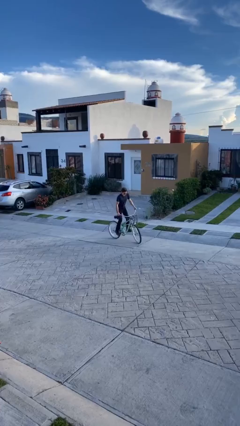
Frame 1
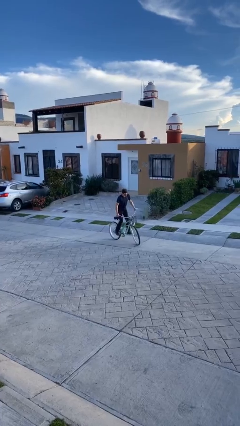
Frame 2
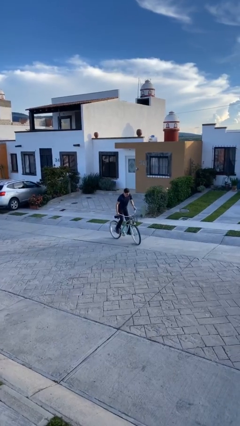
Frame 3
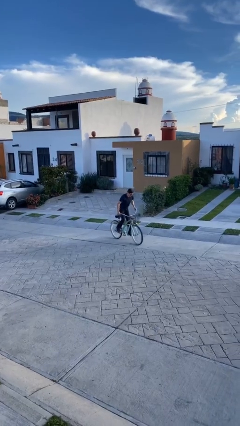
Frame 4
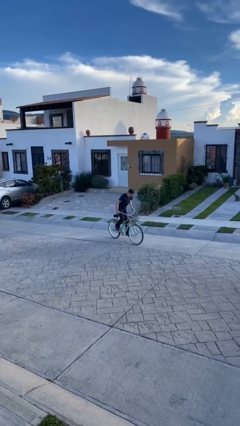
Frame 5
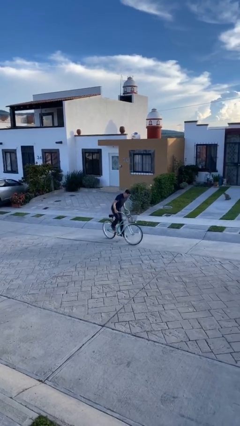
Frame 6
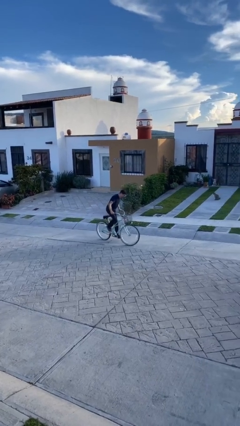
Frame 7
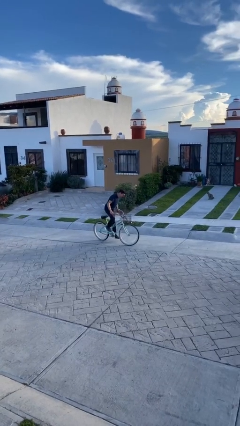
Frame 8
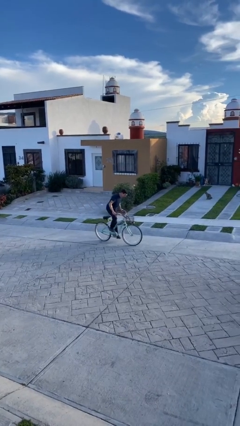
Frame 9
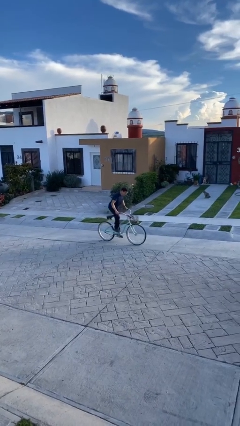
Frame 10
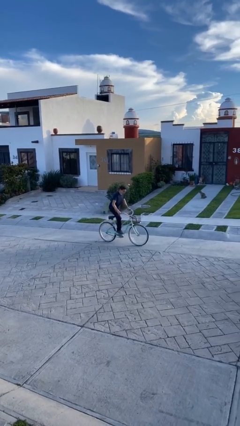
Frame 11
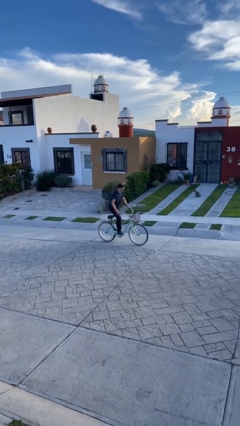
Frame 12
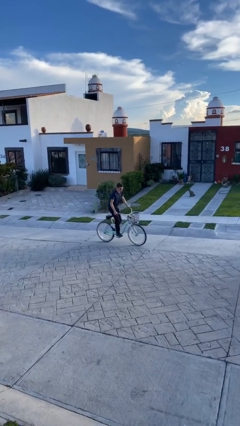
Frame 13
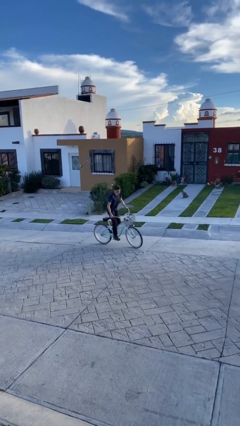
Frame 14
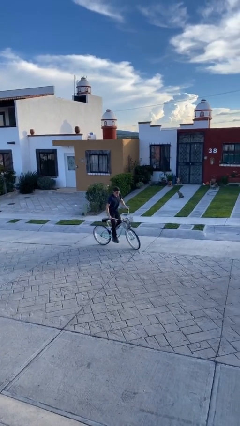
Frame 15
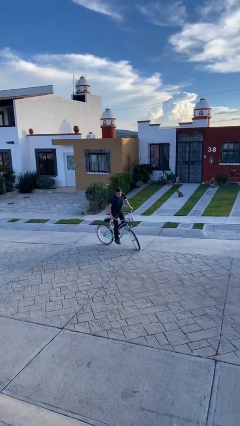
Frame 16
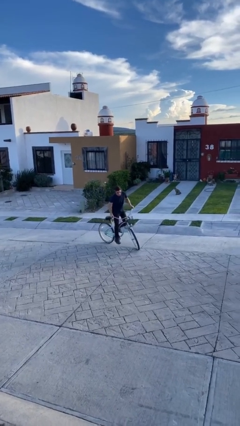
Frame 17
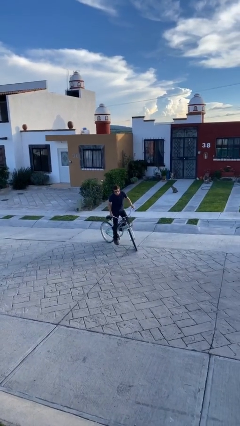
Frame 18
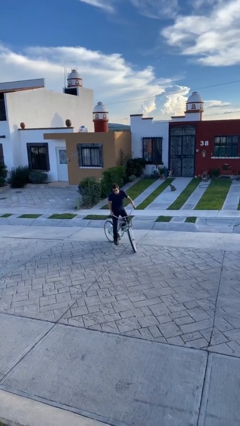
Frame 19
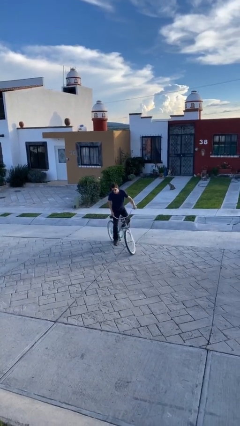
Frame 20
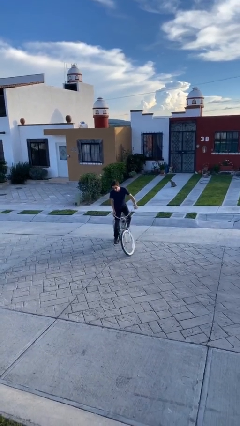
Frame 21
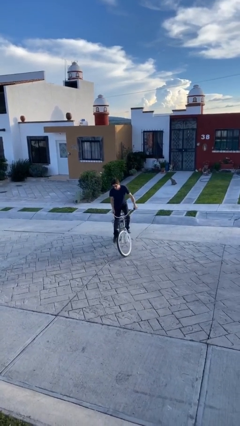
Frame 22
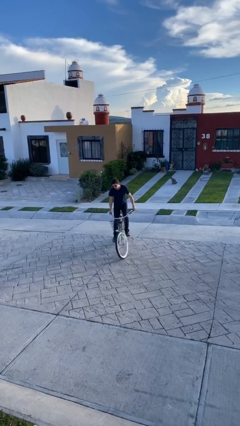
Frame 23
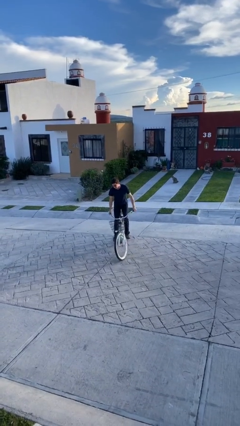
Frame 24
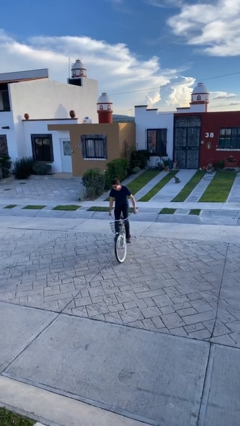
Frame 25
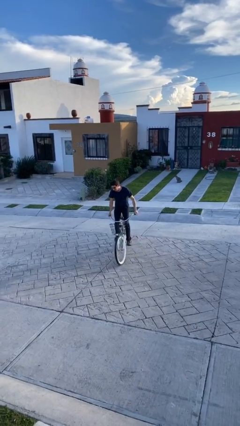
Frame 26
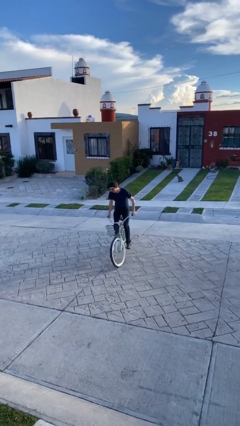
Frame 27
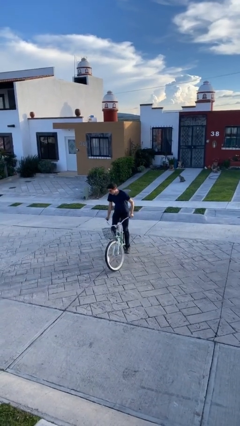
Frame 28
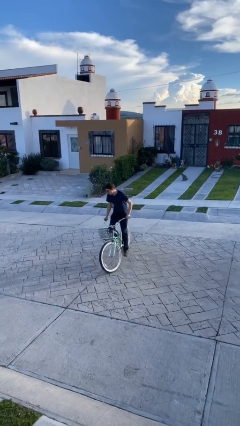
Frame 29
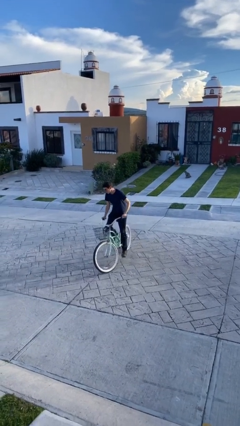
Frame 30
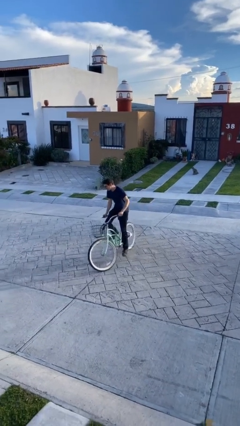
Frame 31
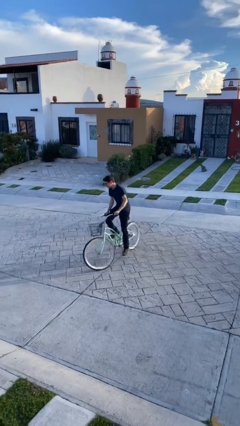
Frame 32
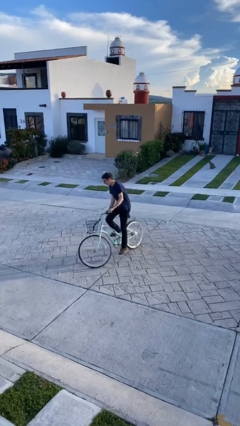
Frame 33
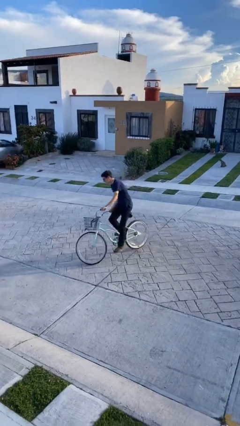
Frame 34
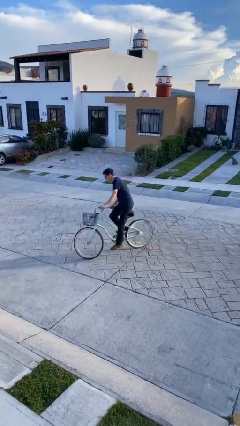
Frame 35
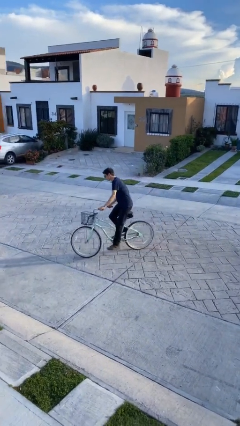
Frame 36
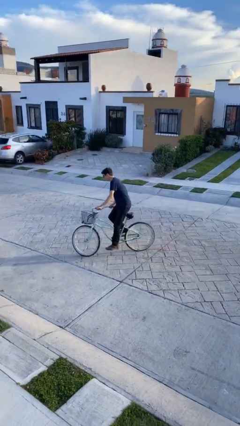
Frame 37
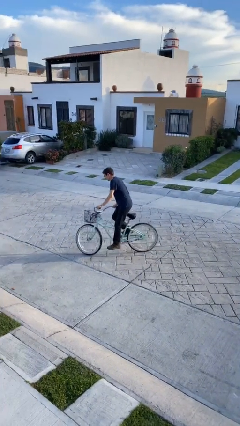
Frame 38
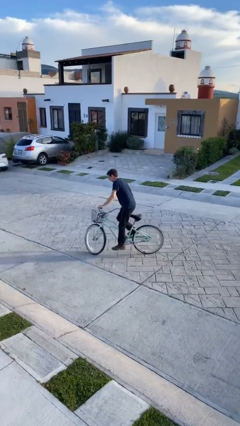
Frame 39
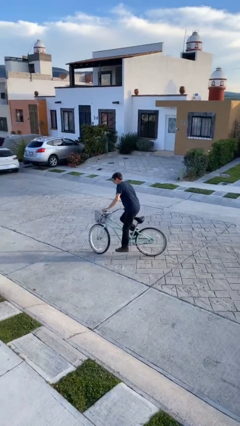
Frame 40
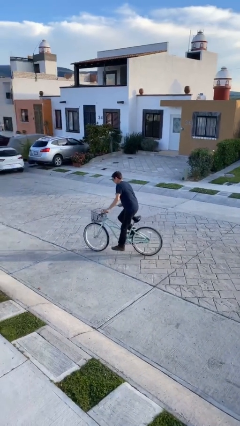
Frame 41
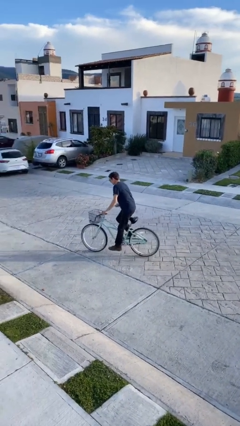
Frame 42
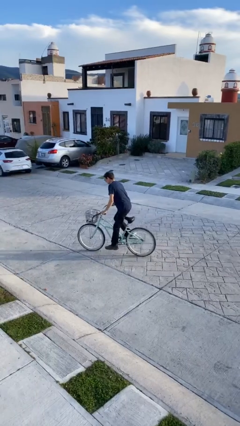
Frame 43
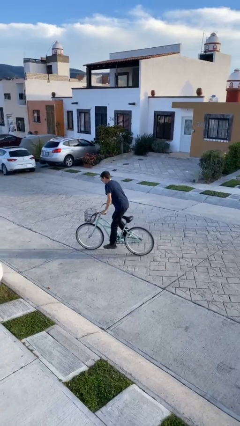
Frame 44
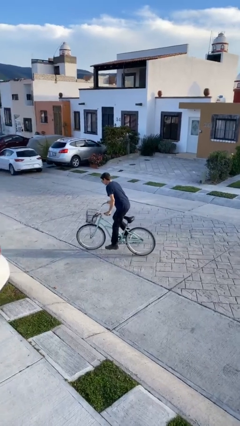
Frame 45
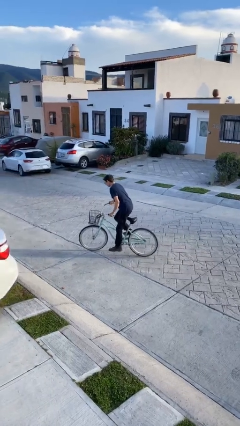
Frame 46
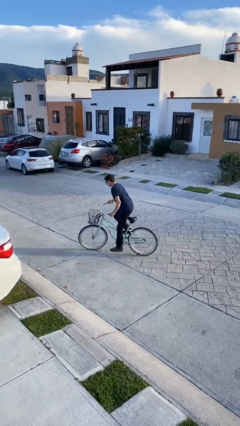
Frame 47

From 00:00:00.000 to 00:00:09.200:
person rides bicycle

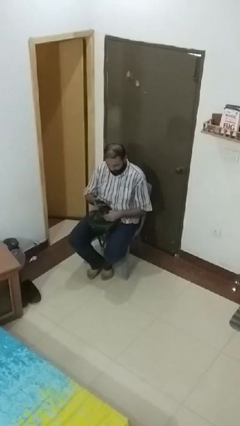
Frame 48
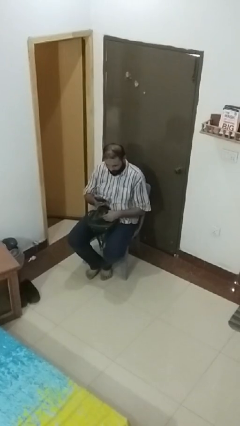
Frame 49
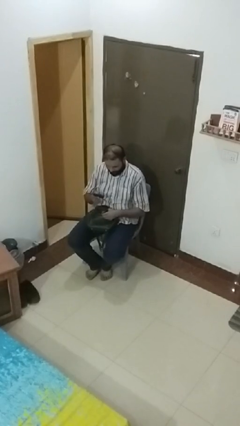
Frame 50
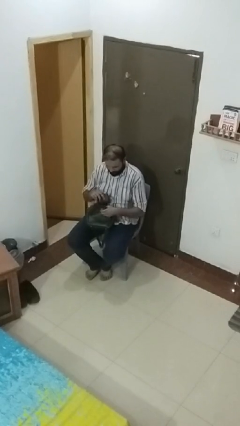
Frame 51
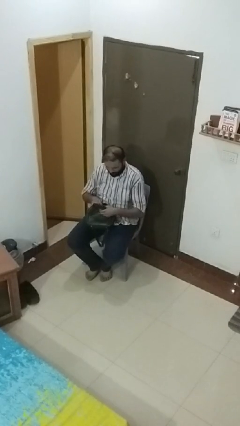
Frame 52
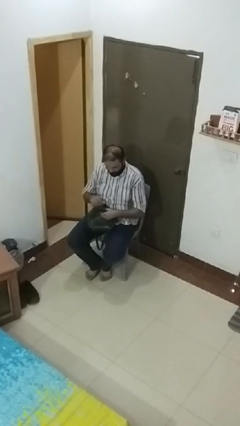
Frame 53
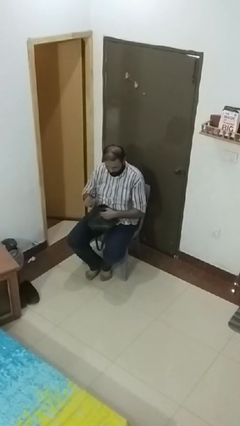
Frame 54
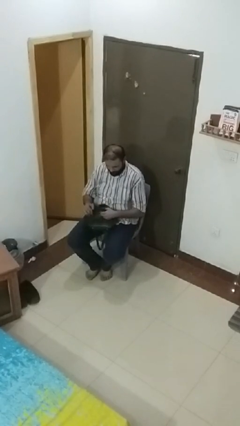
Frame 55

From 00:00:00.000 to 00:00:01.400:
person puts object into purse

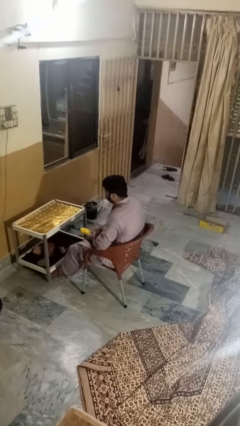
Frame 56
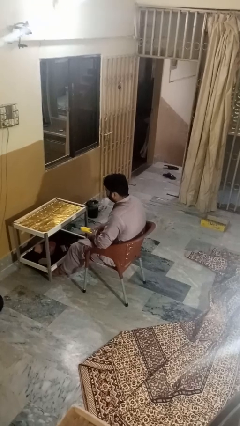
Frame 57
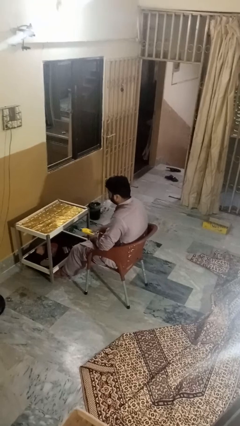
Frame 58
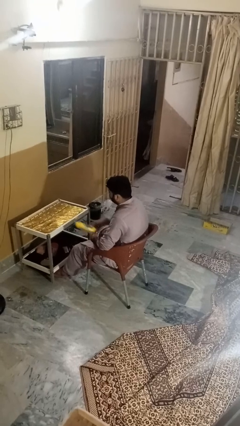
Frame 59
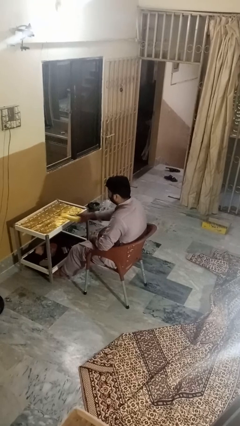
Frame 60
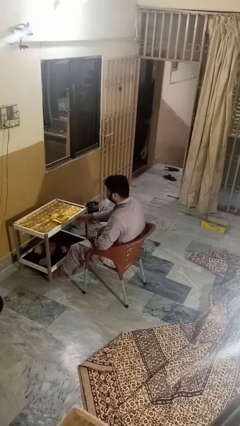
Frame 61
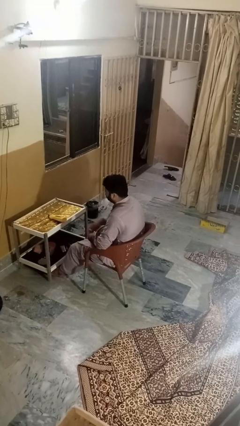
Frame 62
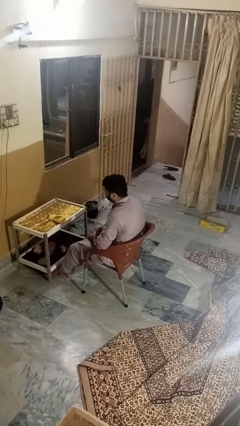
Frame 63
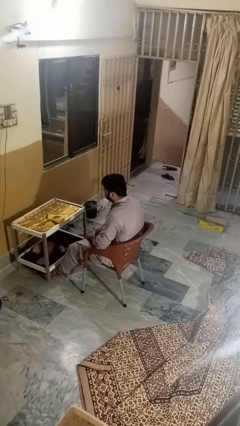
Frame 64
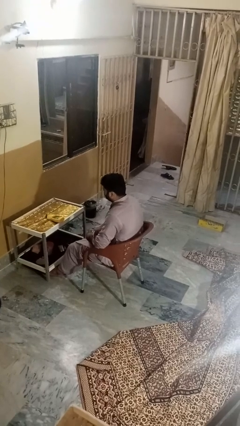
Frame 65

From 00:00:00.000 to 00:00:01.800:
person throws object on table

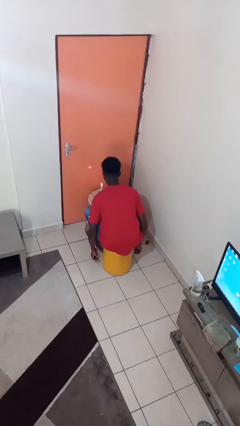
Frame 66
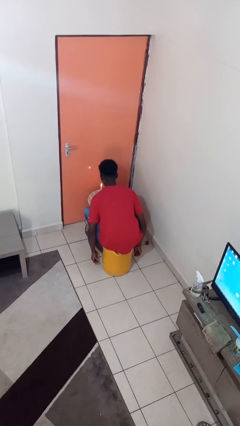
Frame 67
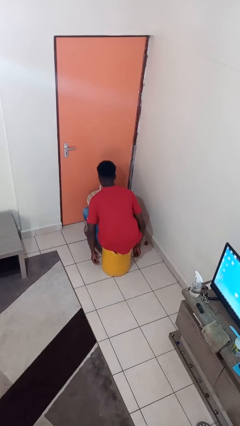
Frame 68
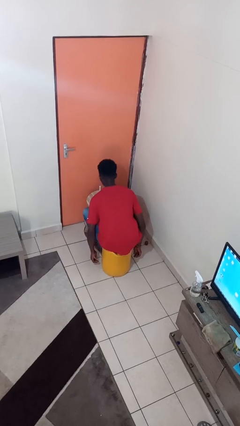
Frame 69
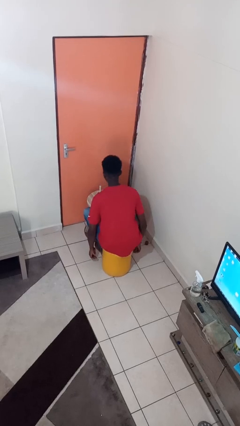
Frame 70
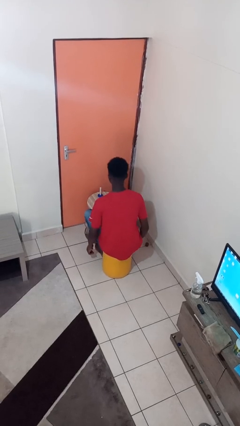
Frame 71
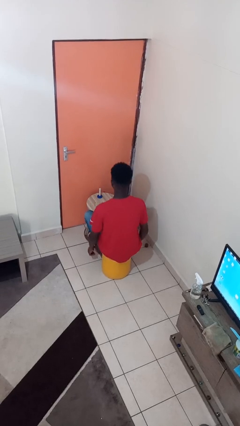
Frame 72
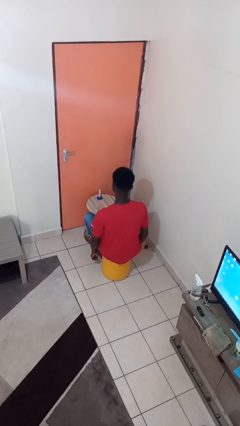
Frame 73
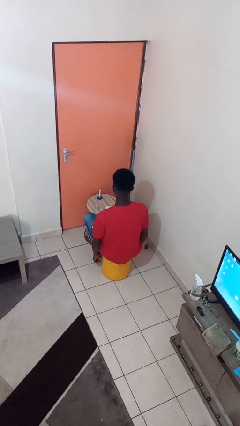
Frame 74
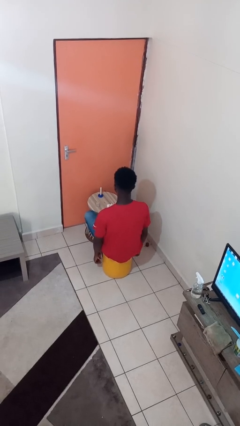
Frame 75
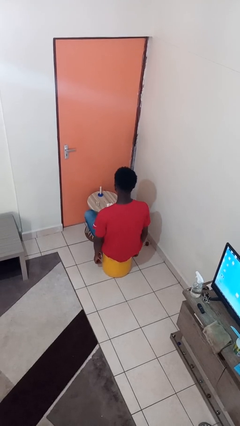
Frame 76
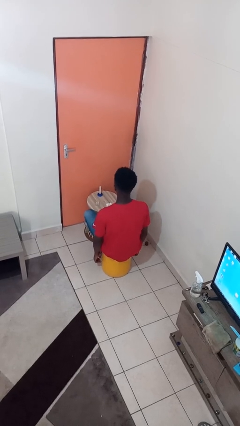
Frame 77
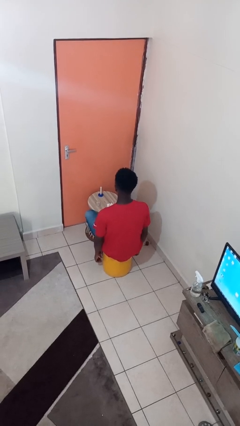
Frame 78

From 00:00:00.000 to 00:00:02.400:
person extinguishes candle

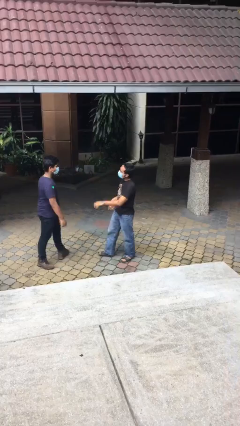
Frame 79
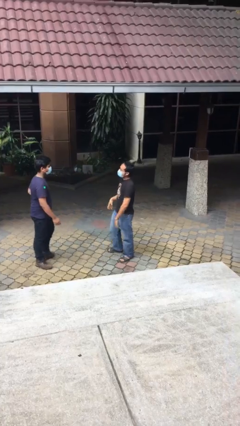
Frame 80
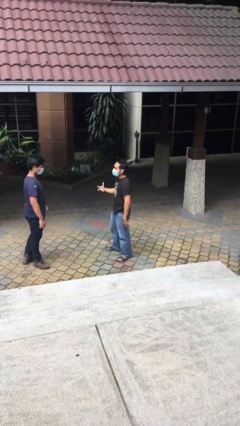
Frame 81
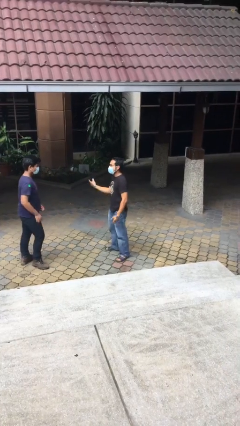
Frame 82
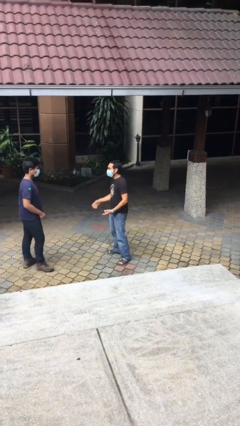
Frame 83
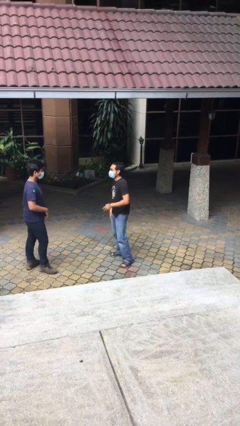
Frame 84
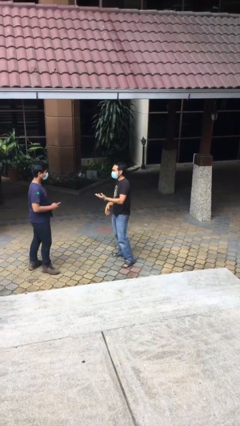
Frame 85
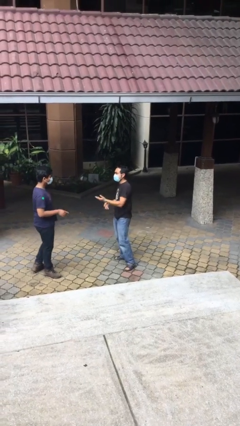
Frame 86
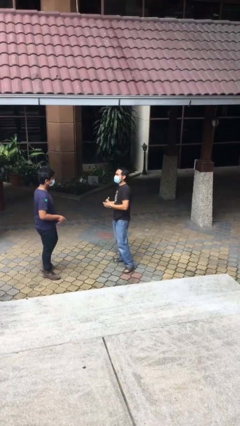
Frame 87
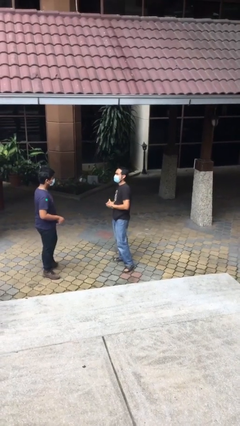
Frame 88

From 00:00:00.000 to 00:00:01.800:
person talks to person

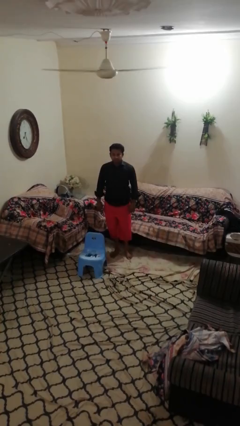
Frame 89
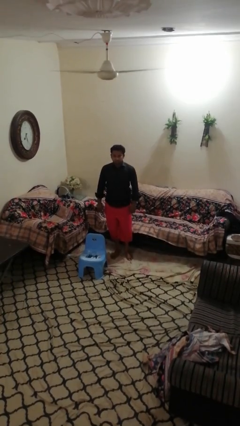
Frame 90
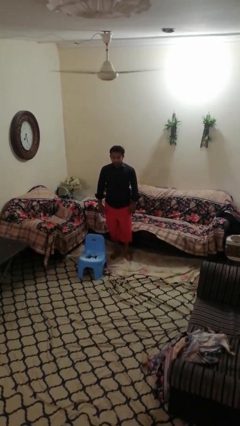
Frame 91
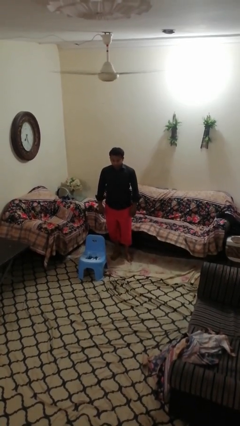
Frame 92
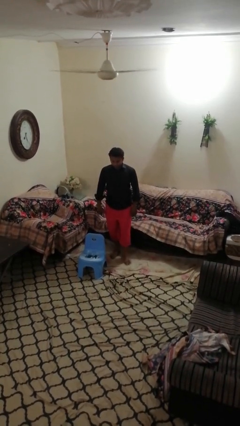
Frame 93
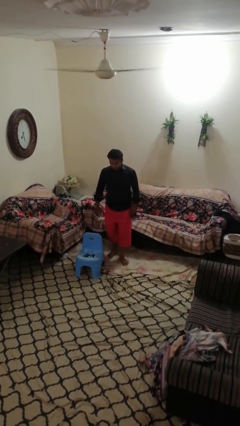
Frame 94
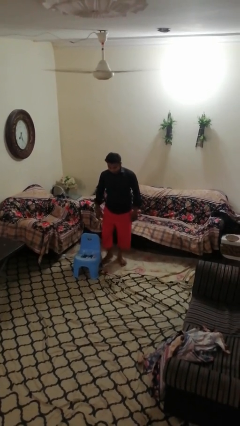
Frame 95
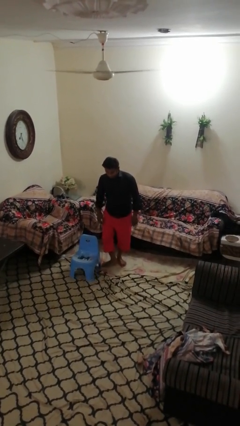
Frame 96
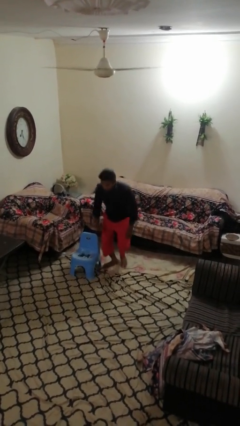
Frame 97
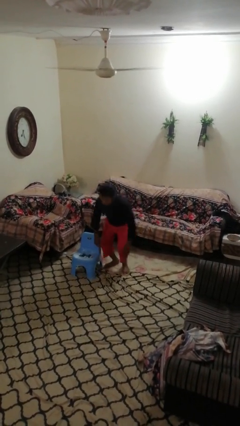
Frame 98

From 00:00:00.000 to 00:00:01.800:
person trips on object on floor
